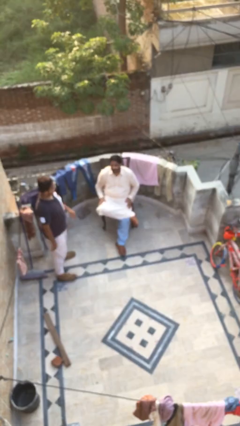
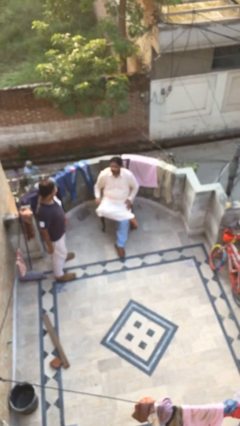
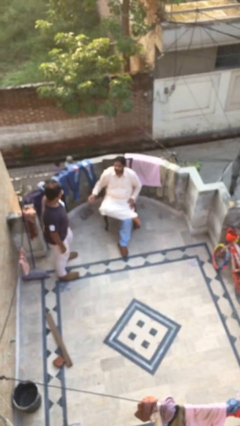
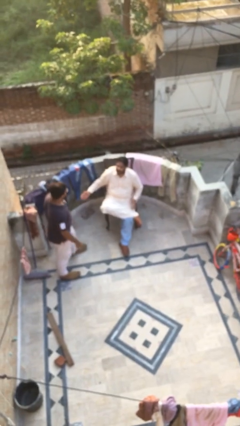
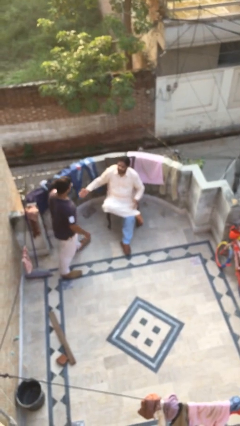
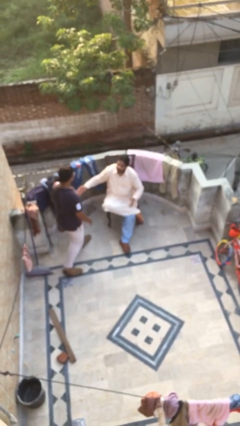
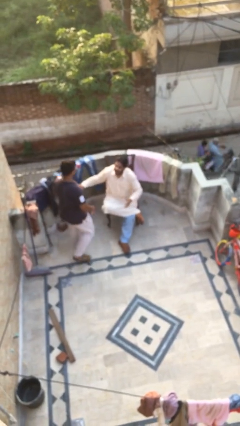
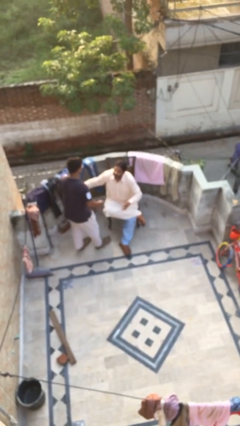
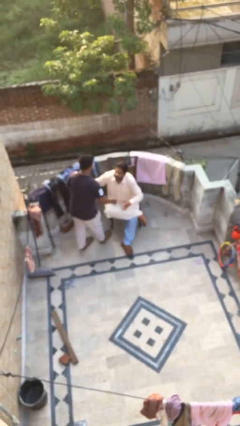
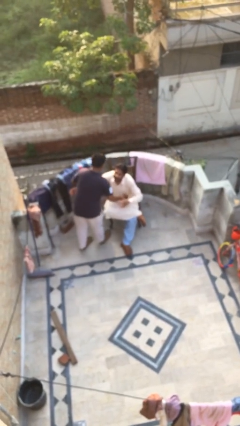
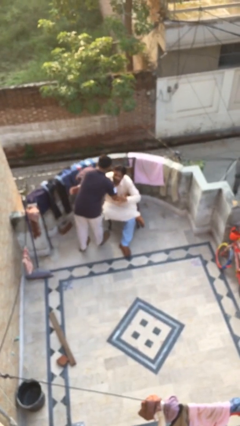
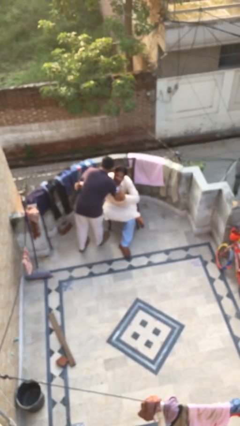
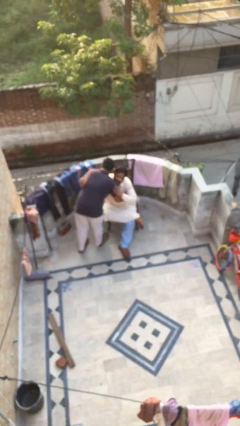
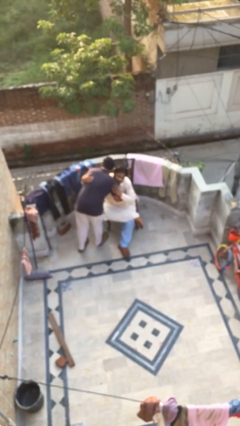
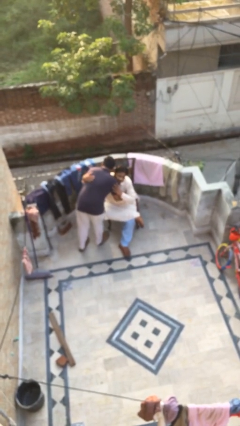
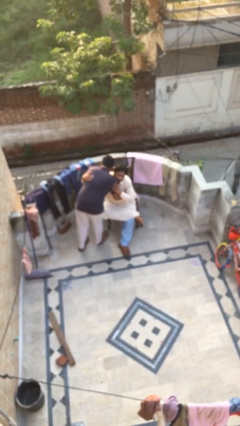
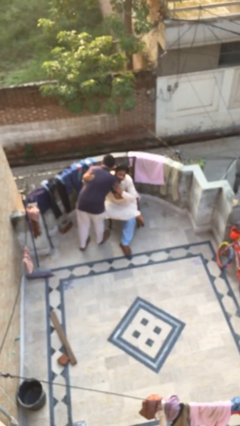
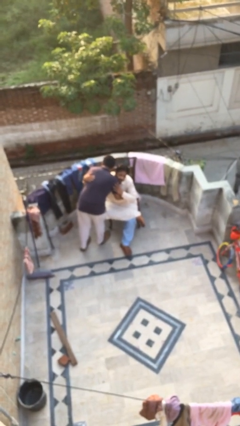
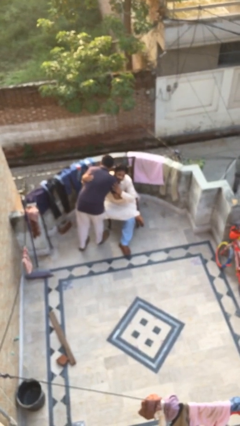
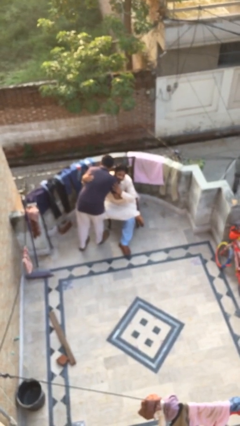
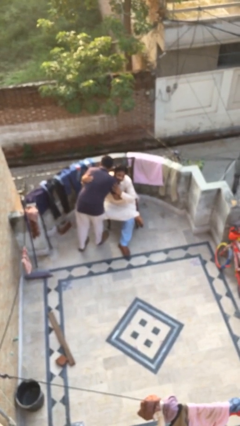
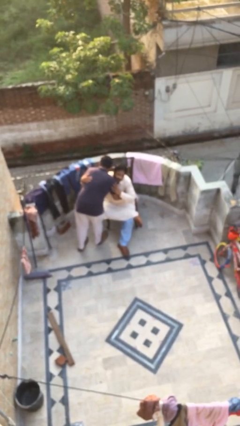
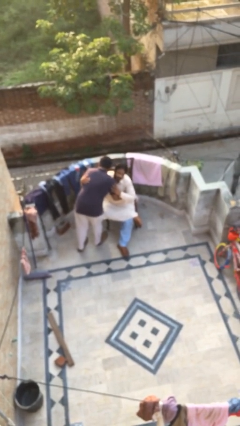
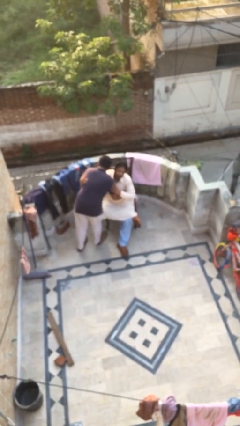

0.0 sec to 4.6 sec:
person embraces person

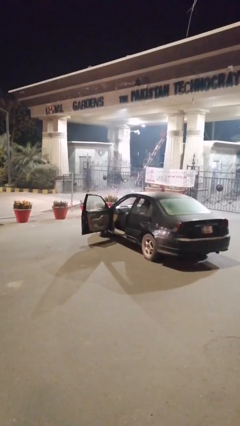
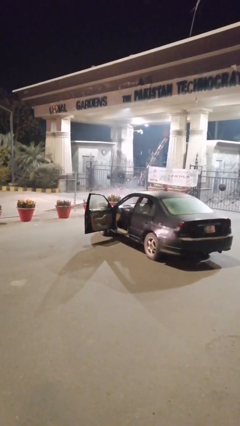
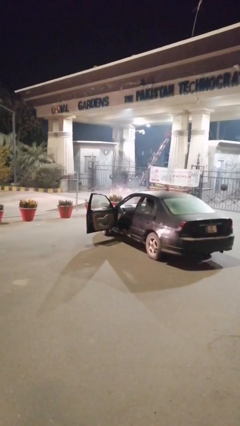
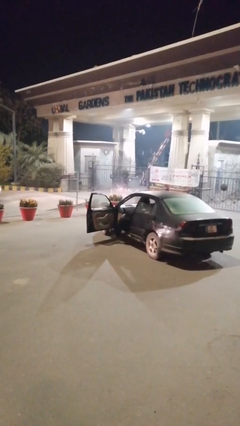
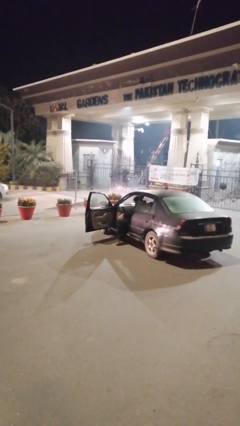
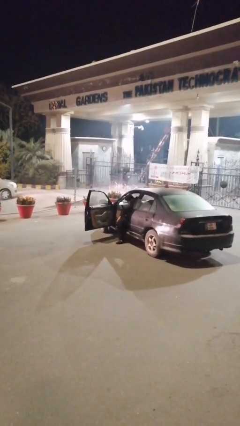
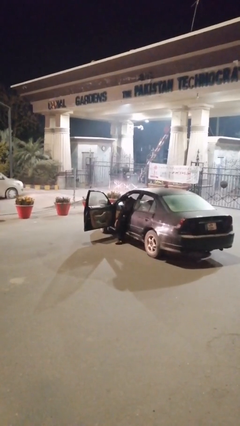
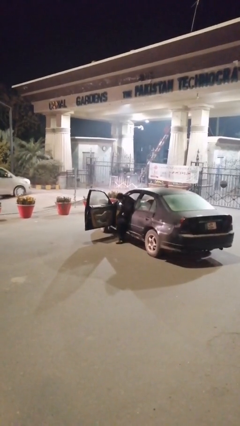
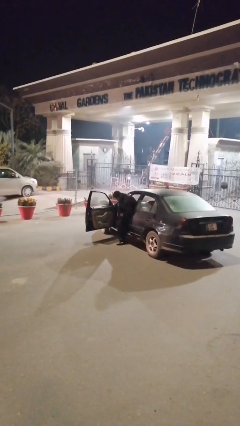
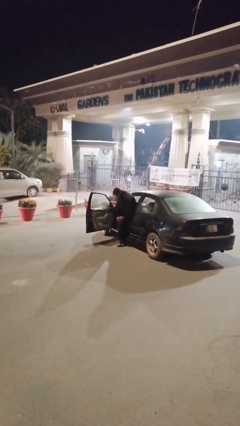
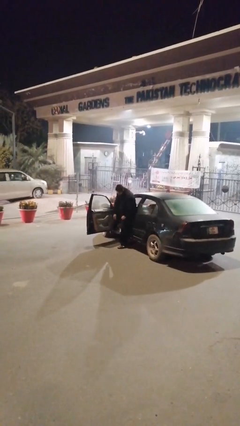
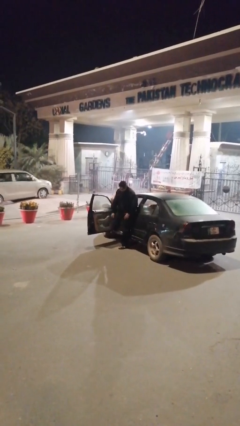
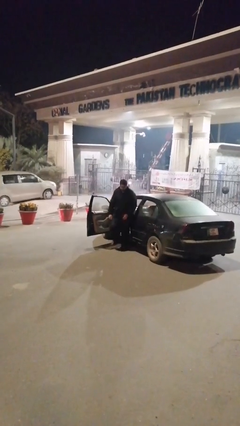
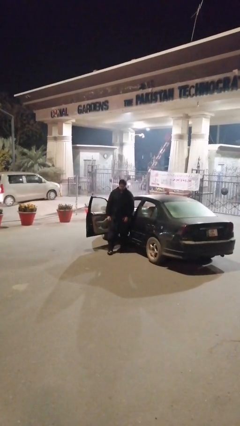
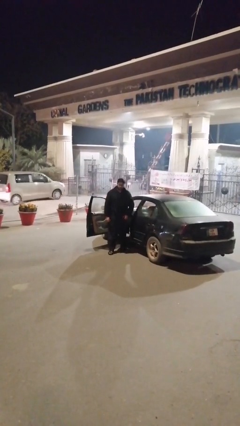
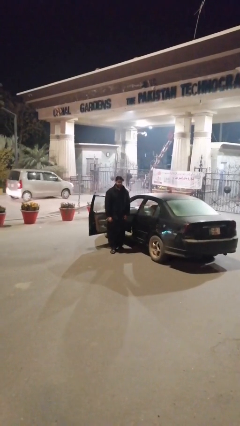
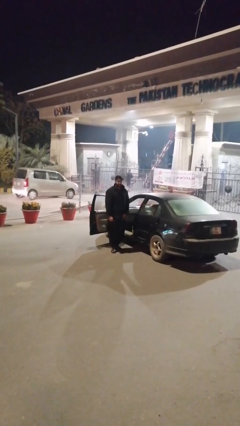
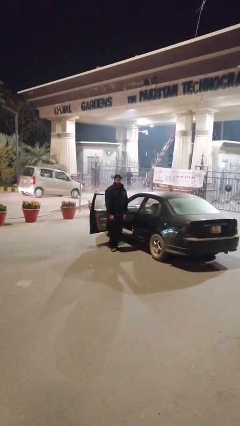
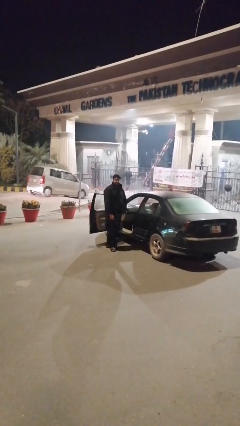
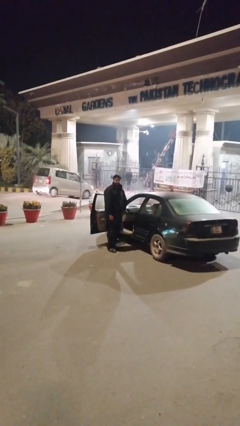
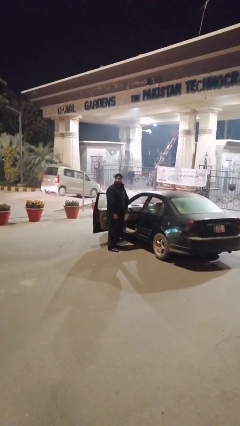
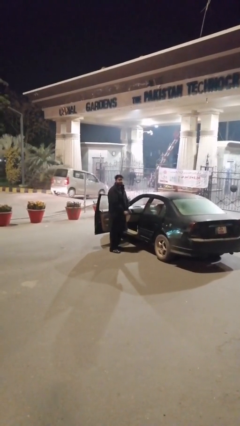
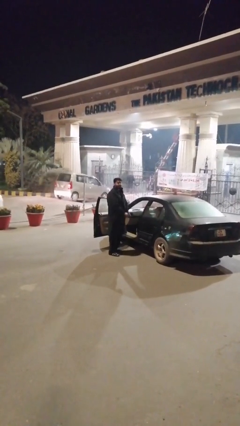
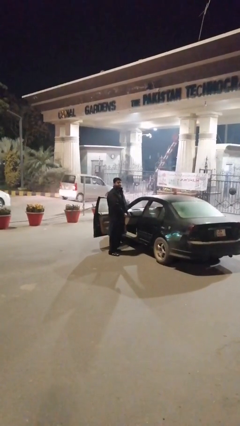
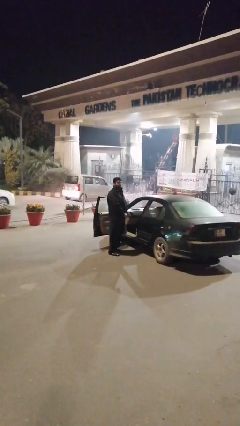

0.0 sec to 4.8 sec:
person exits car

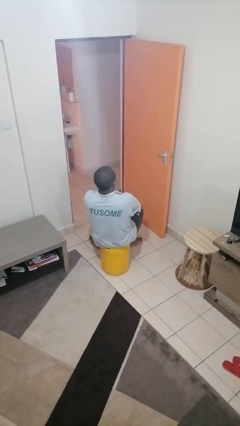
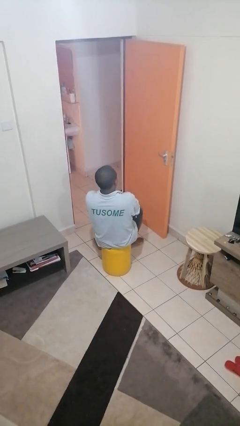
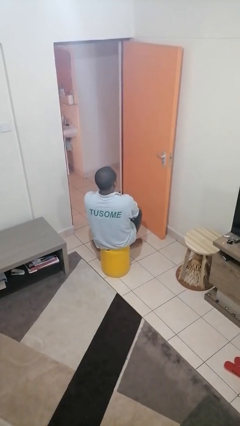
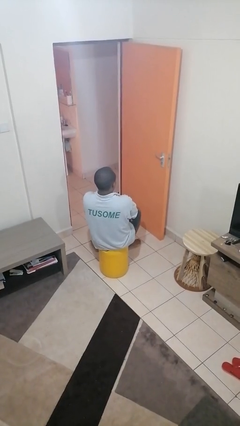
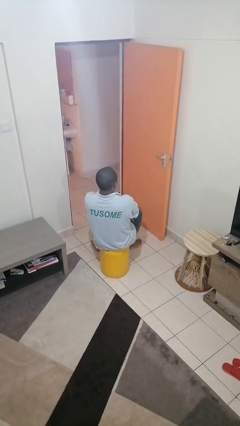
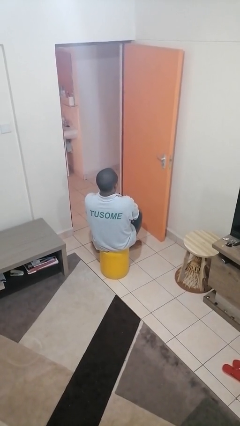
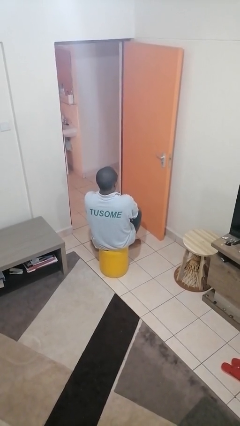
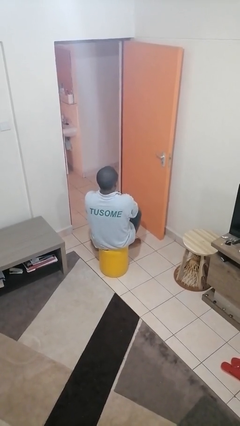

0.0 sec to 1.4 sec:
person crosses arms

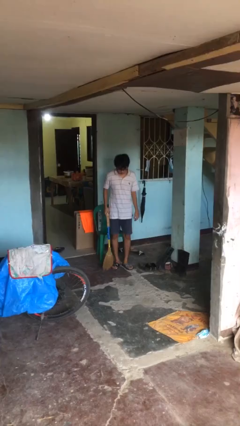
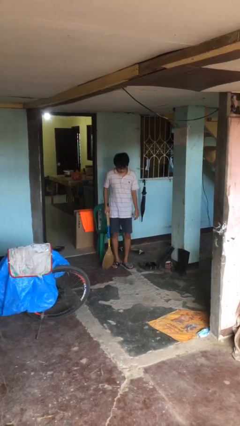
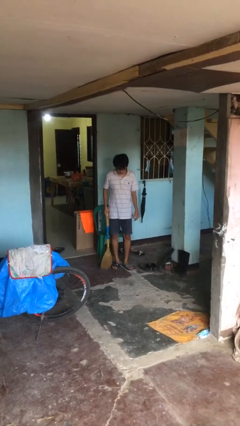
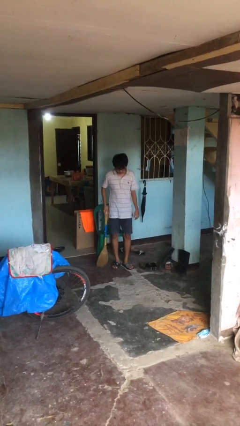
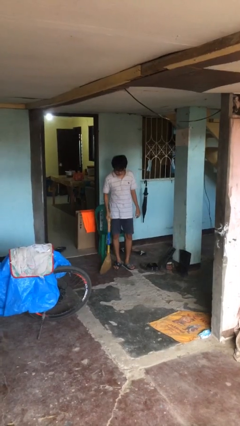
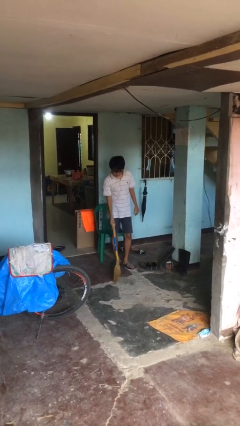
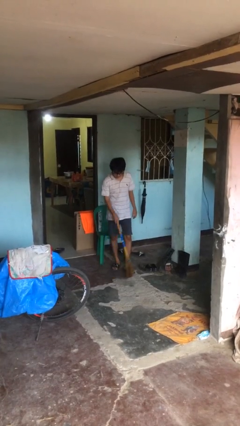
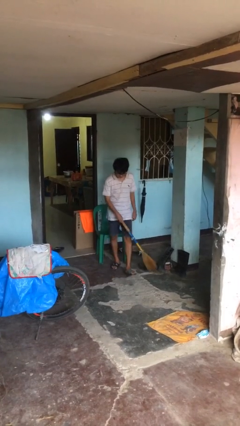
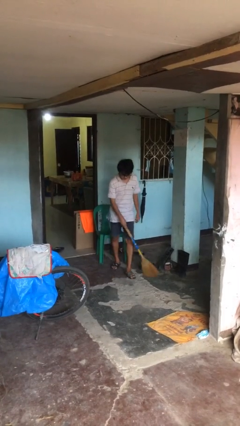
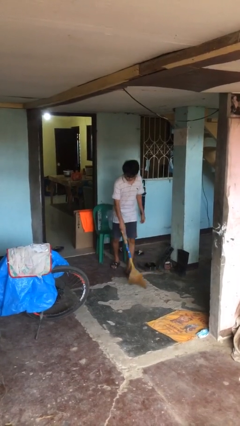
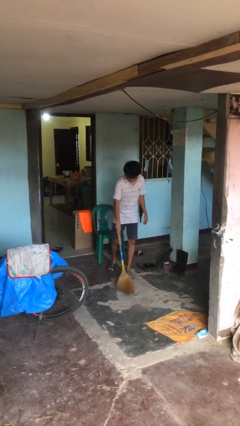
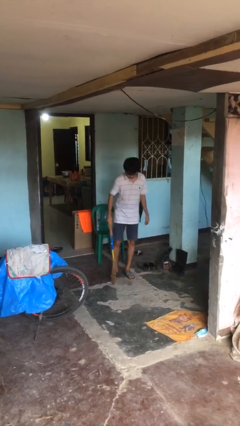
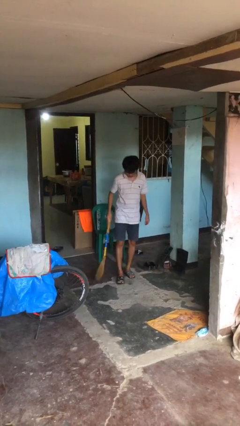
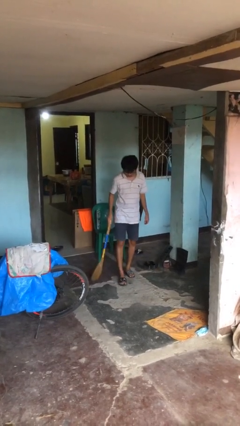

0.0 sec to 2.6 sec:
person sweeps floor

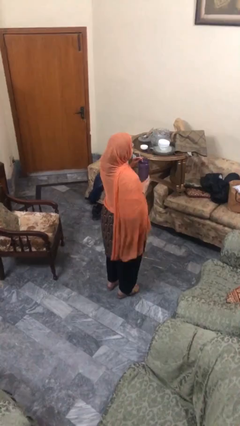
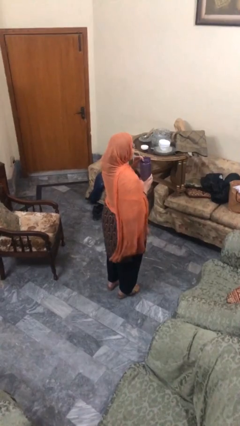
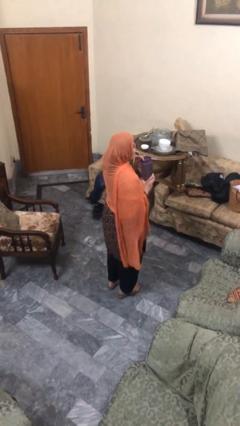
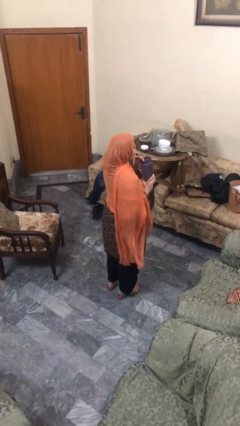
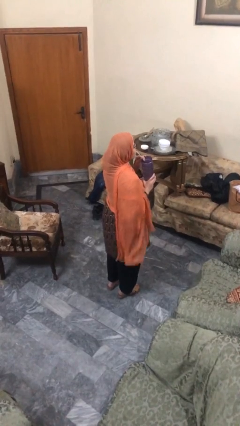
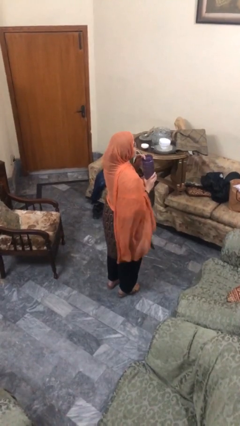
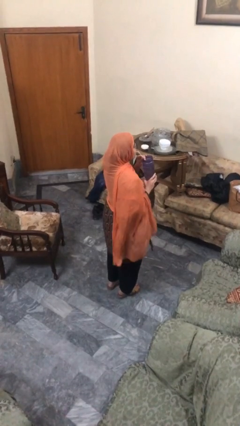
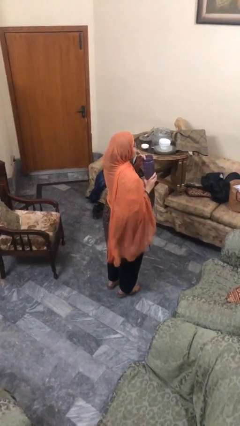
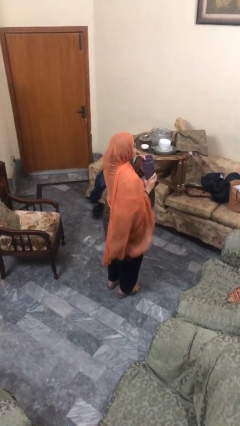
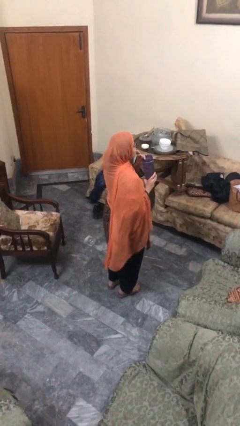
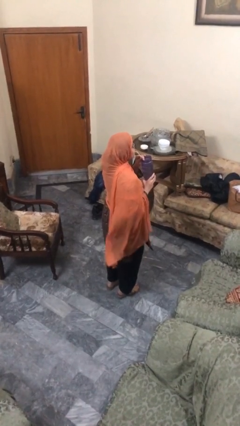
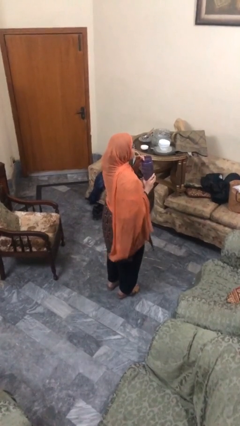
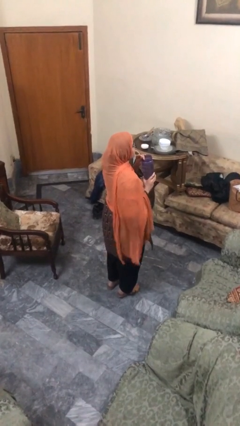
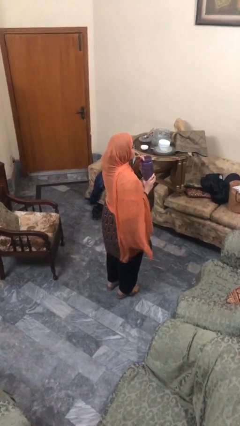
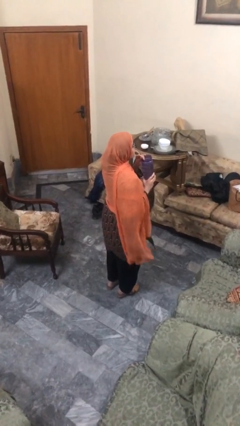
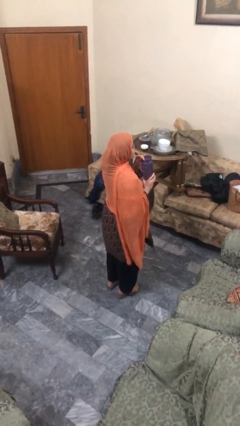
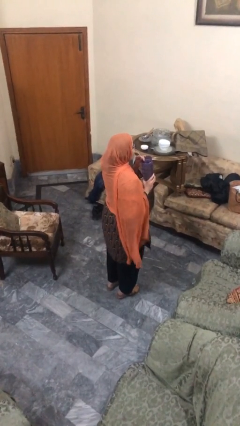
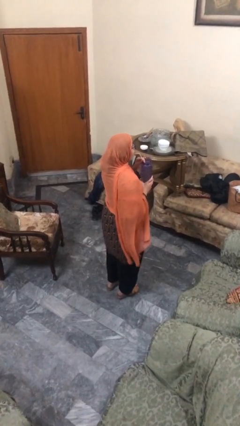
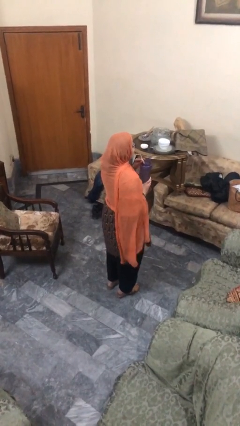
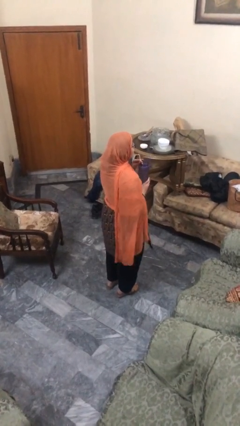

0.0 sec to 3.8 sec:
person drinks from straw

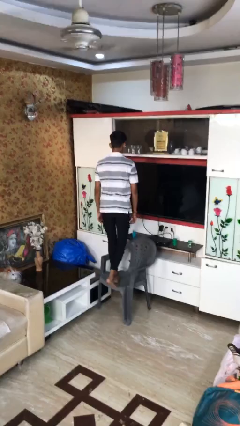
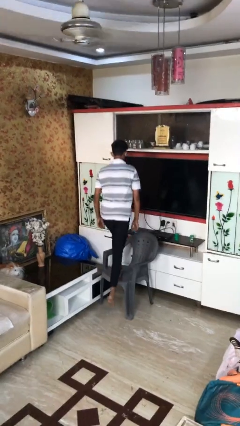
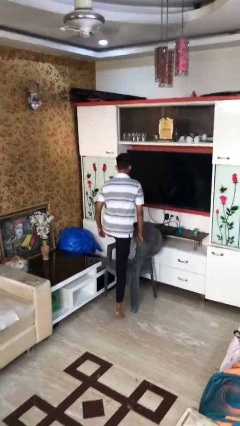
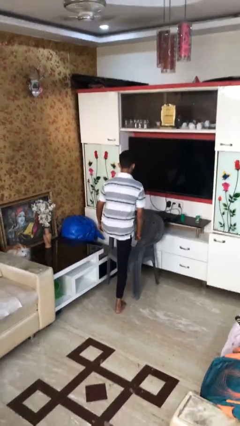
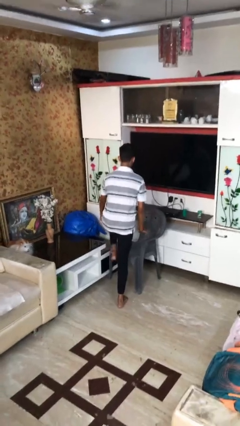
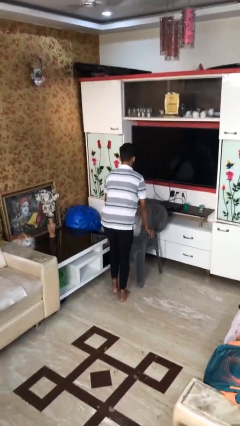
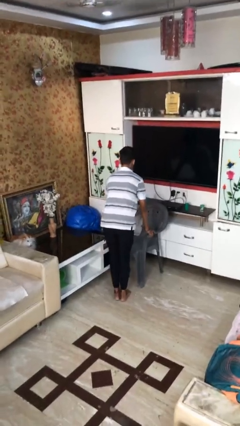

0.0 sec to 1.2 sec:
person climbs off chair
